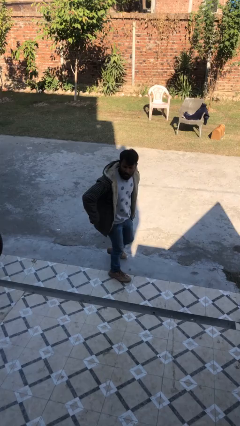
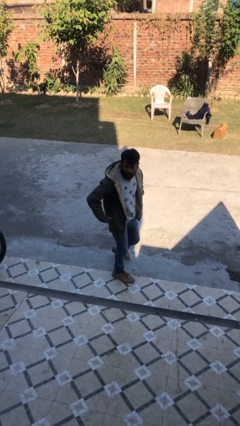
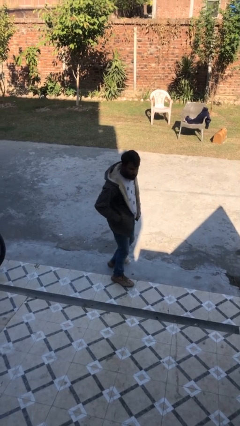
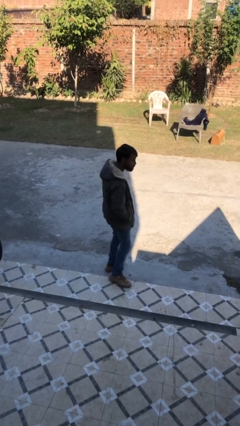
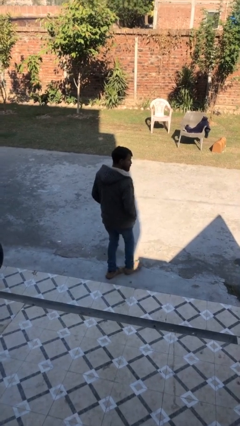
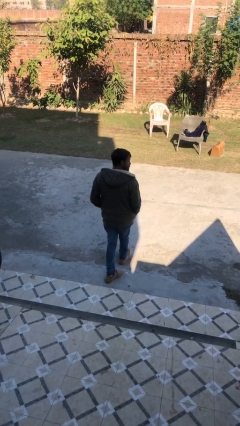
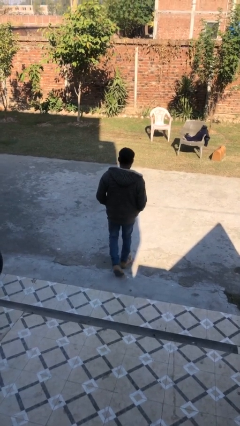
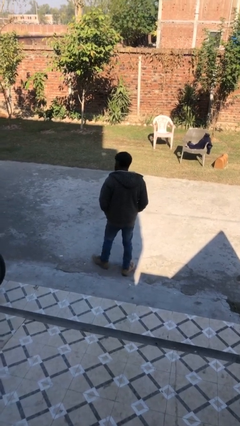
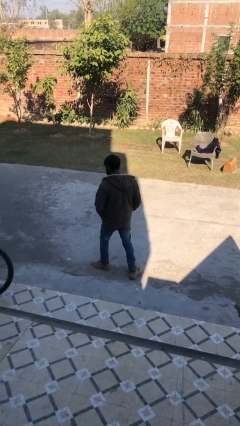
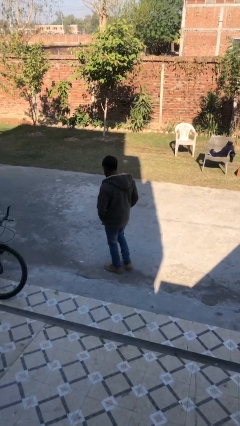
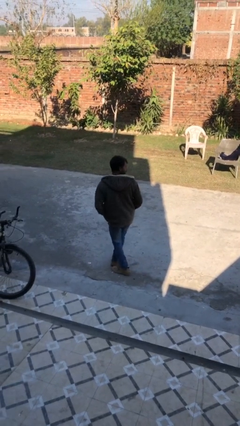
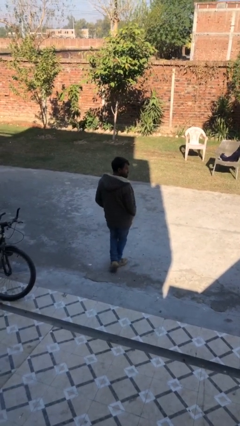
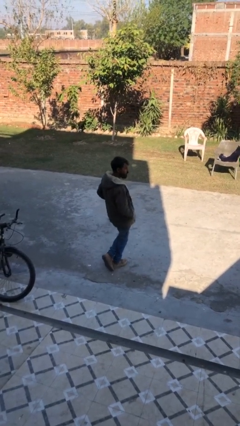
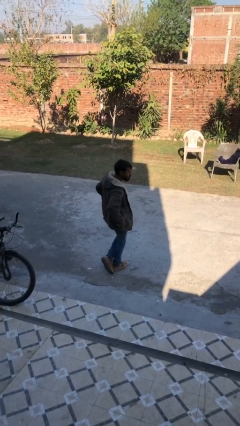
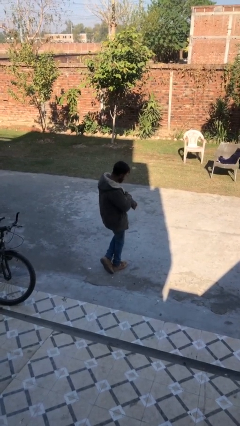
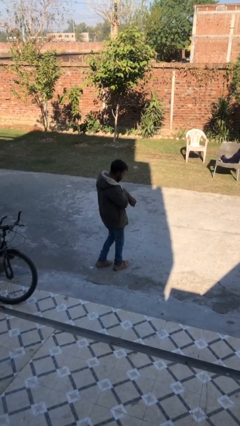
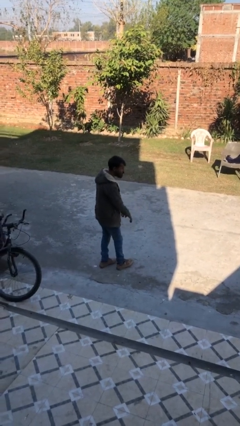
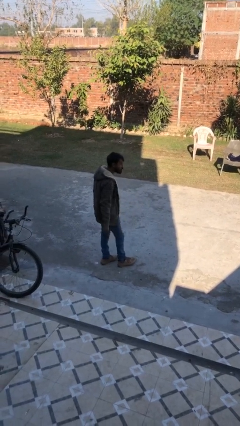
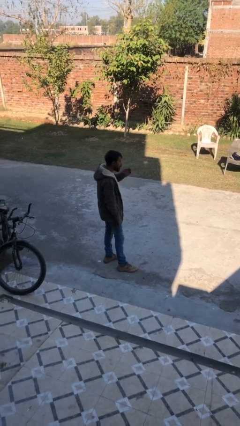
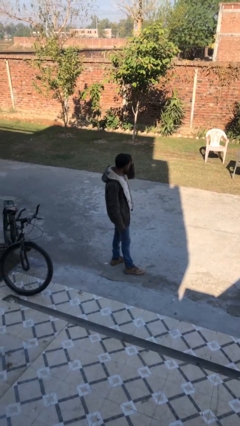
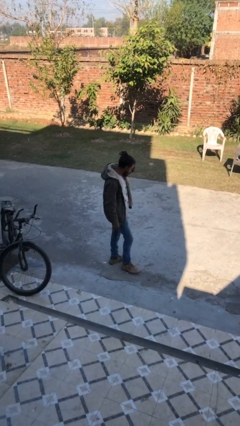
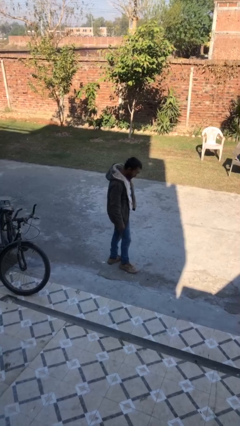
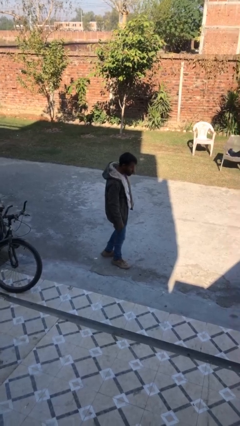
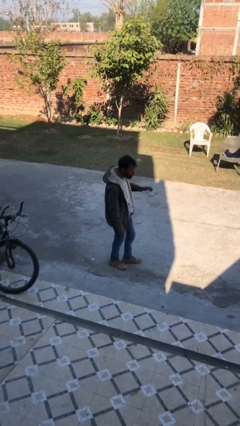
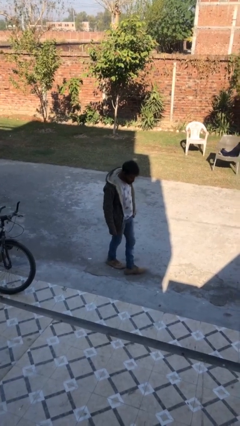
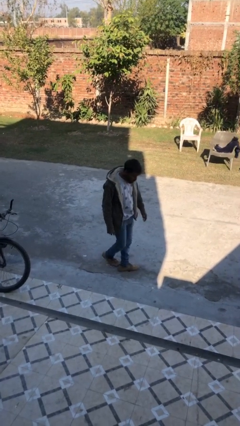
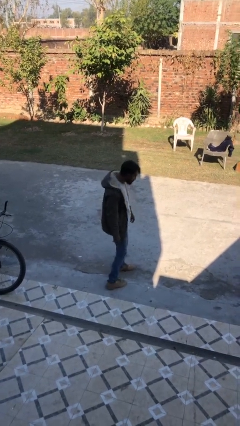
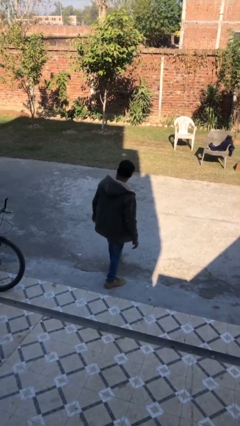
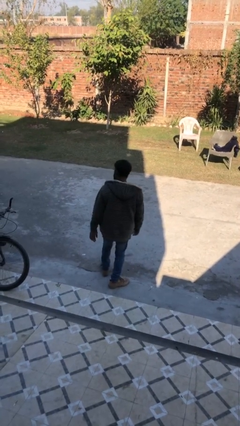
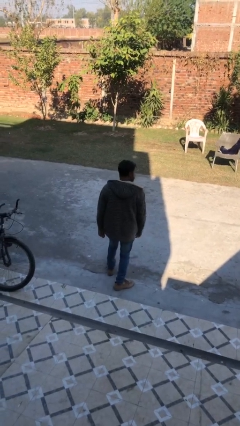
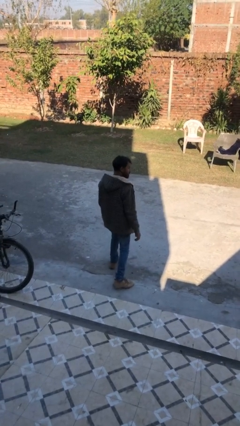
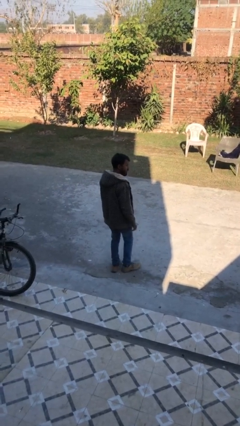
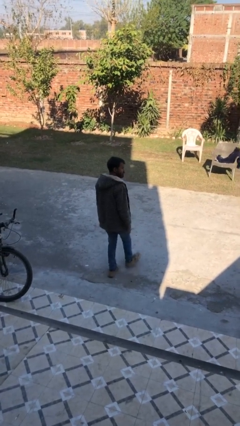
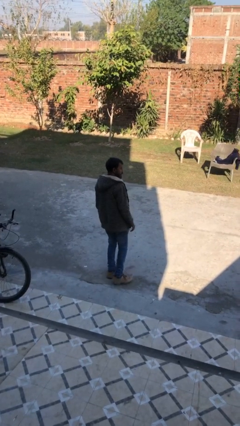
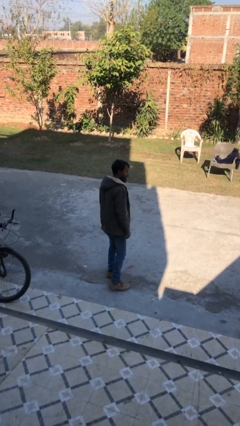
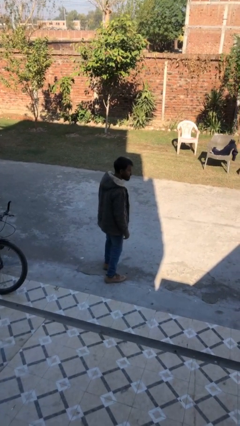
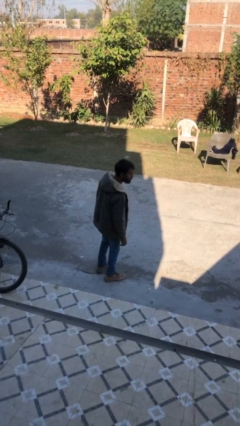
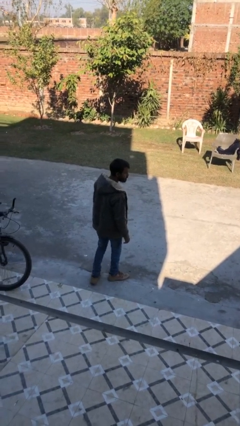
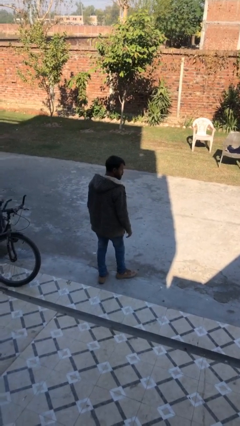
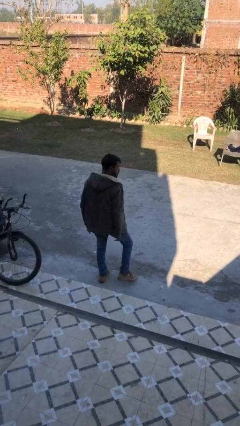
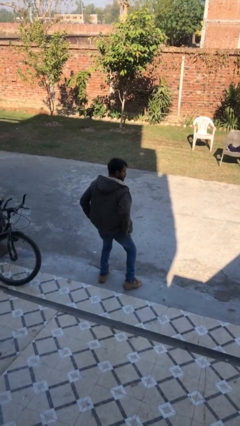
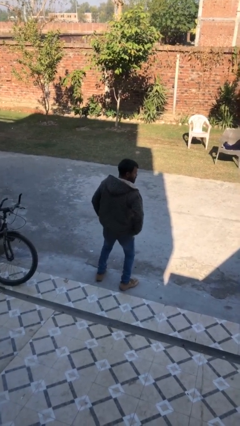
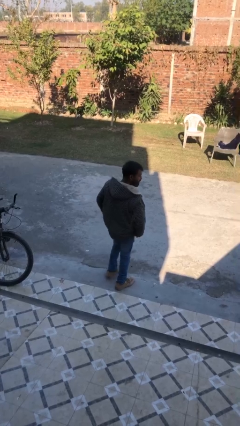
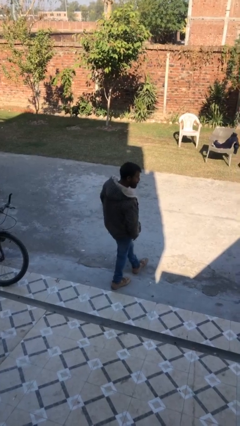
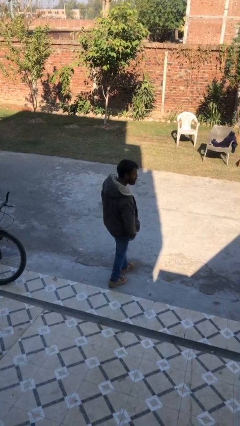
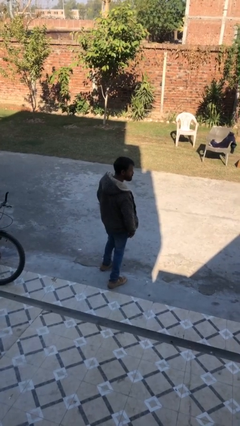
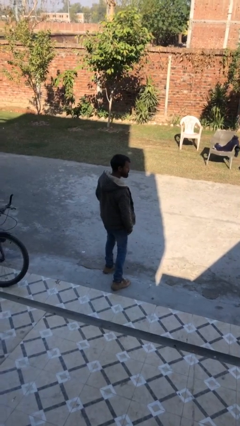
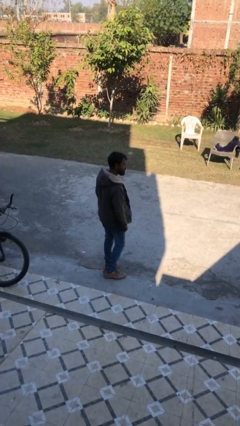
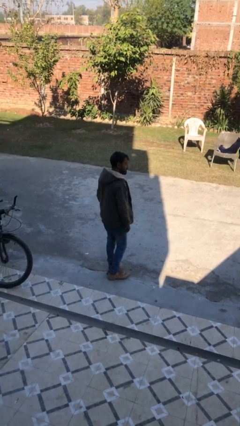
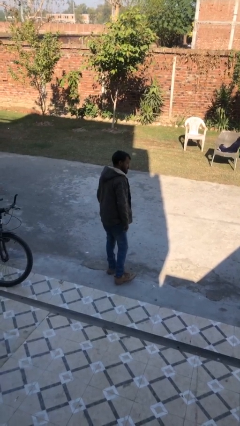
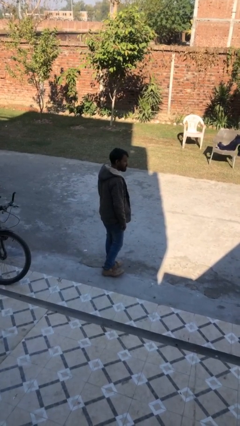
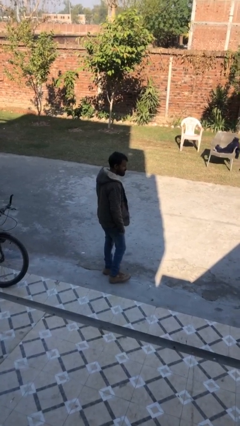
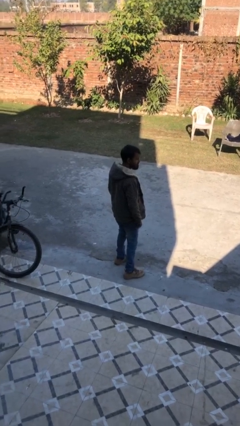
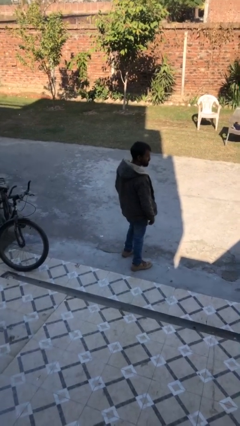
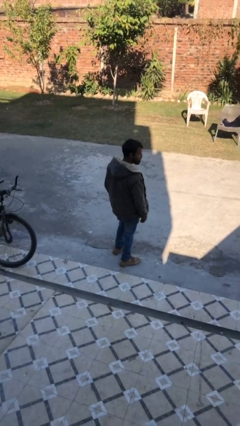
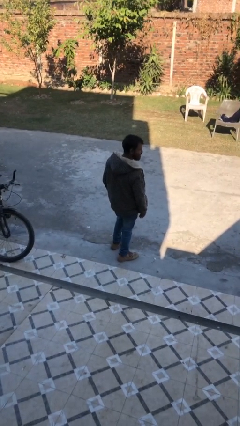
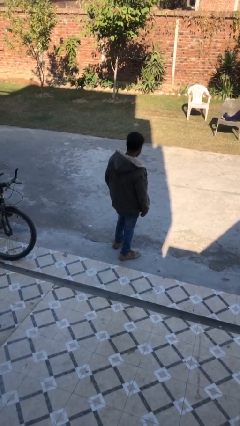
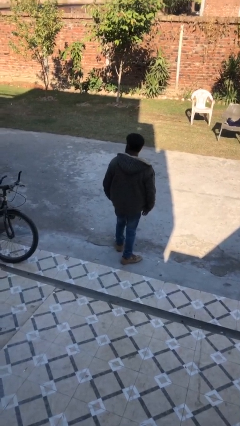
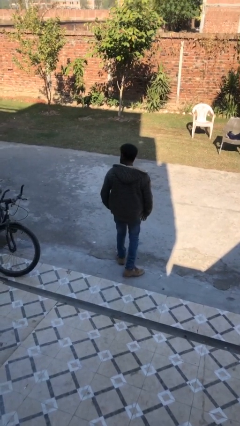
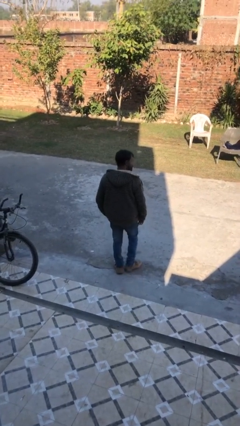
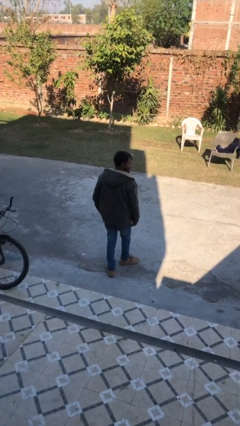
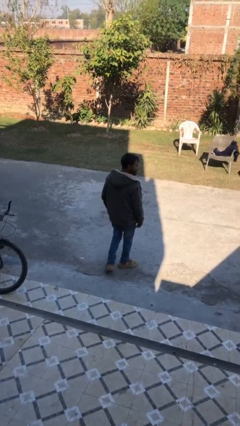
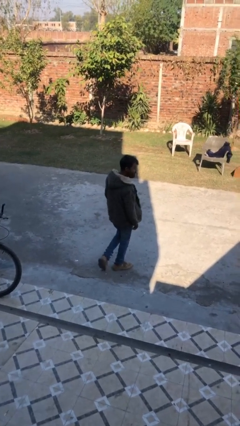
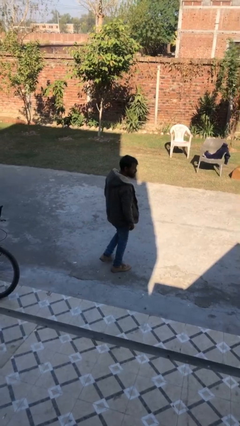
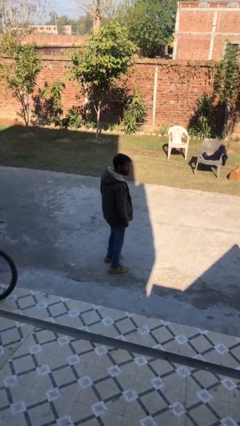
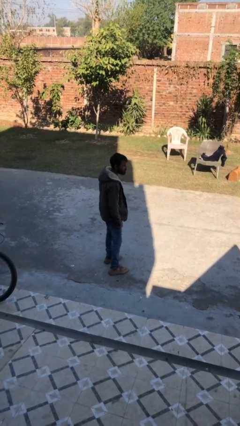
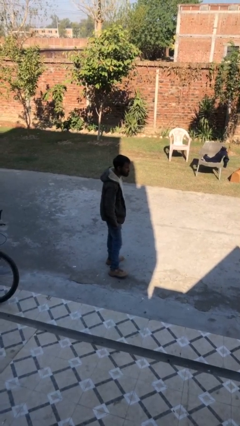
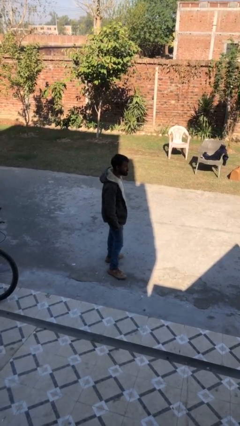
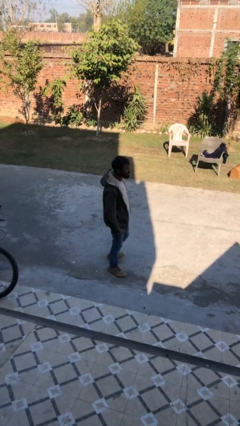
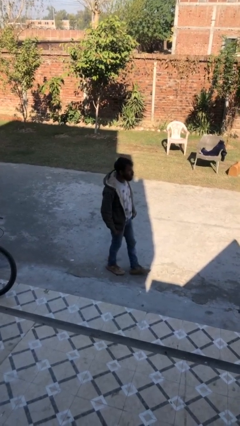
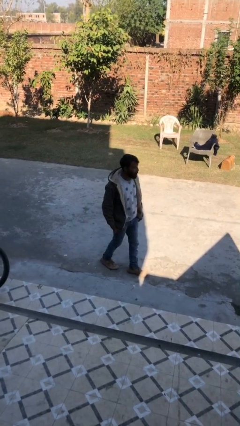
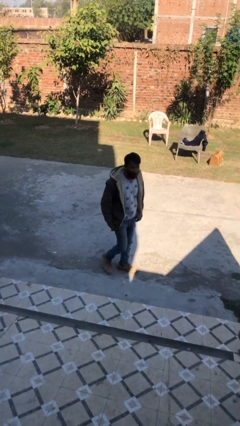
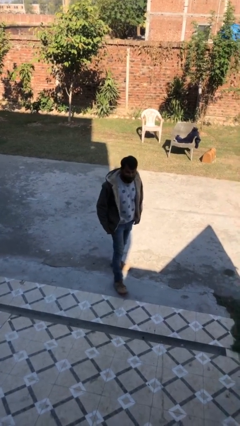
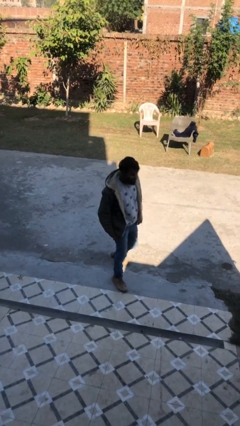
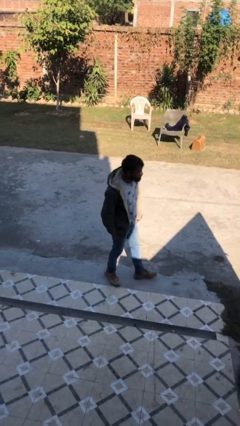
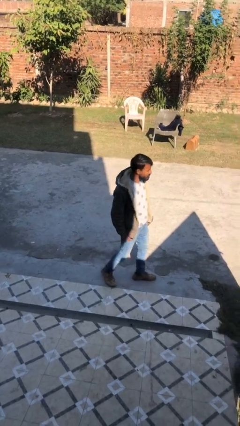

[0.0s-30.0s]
person walks

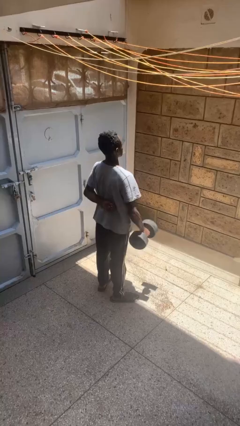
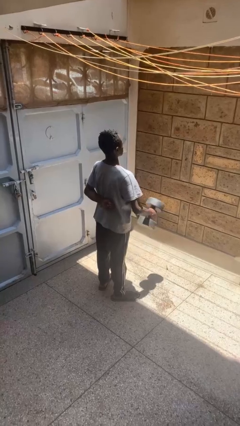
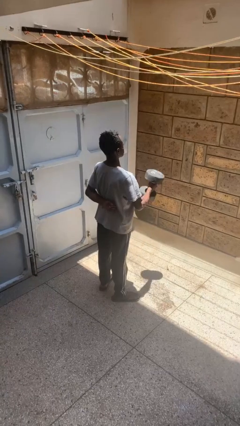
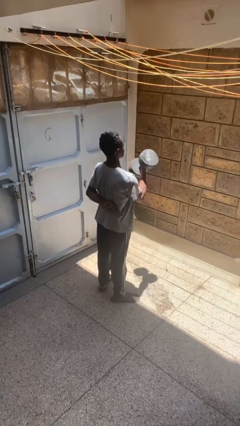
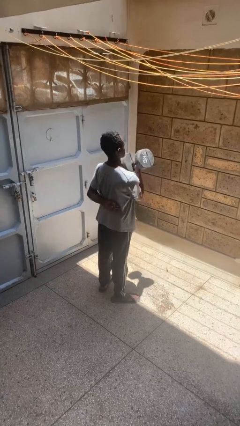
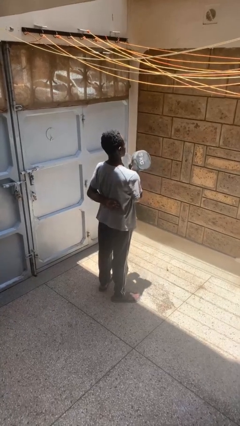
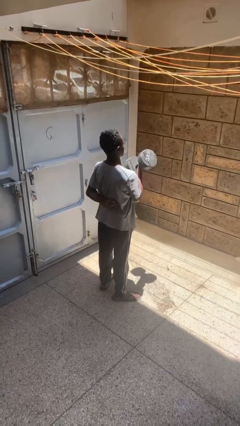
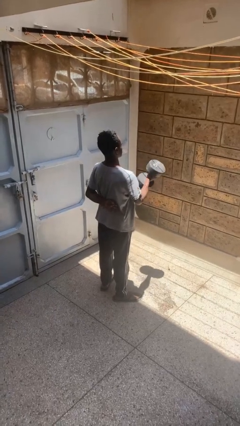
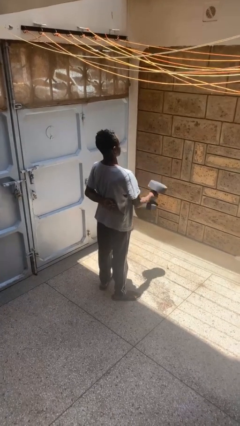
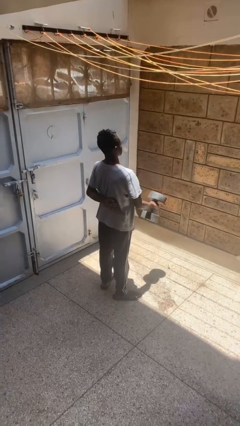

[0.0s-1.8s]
person lifts dumbbells

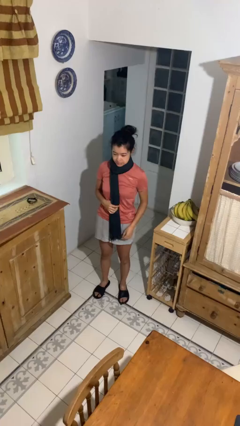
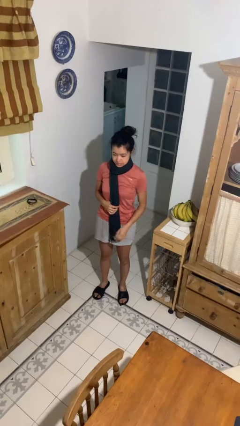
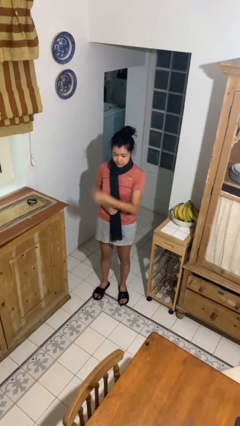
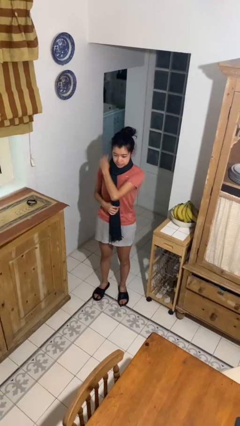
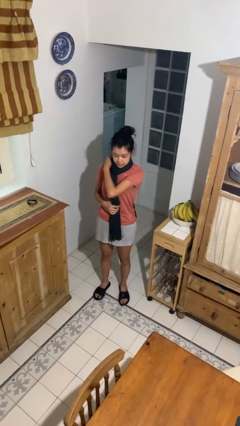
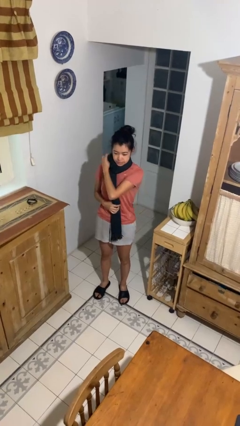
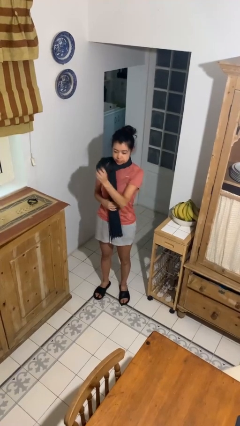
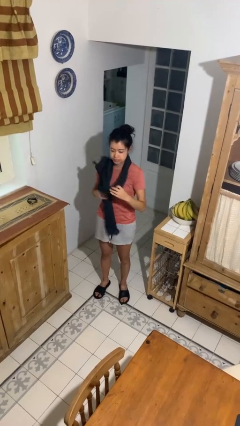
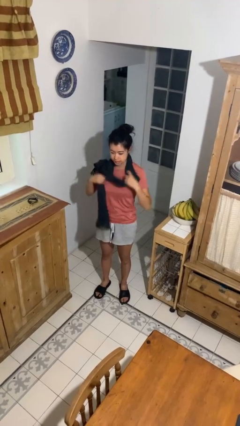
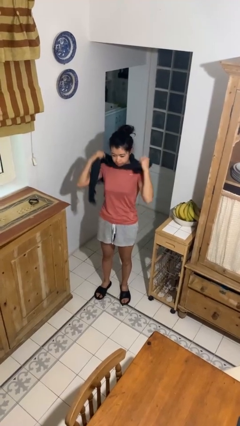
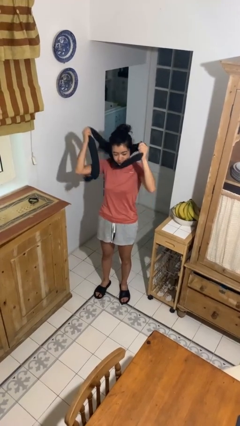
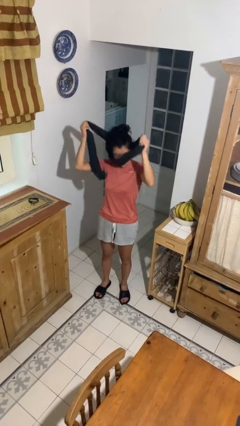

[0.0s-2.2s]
person takes off scarf
